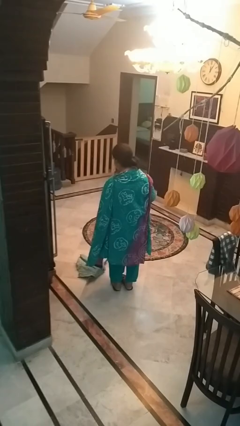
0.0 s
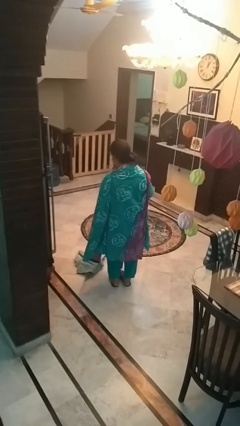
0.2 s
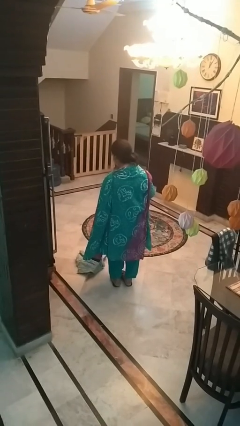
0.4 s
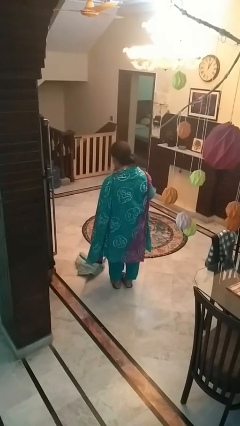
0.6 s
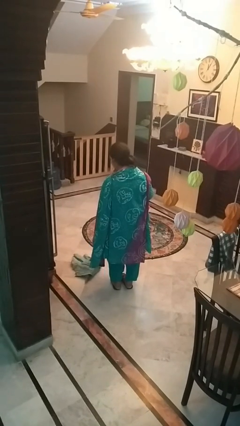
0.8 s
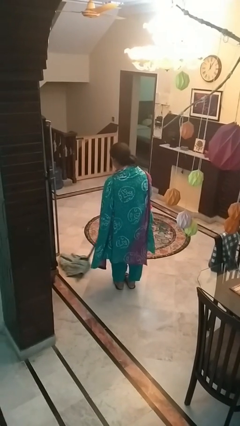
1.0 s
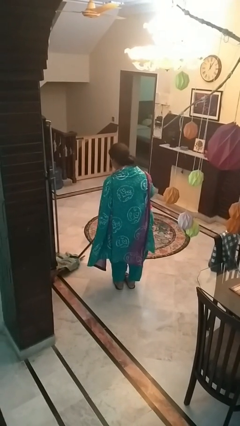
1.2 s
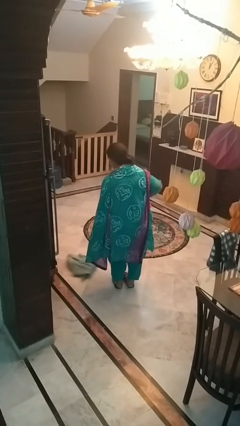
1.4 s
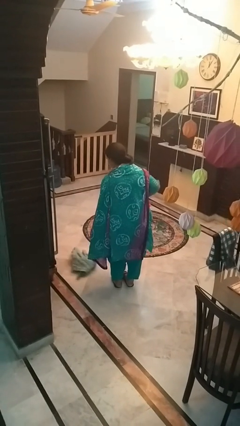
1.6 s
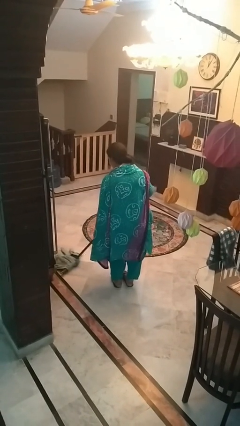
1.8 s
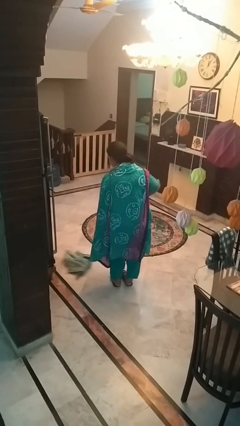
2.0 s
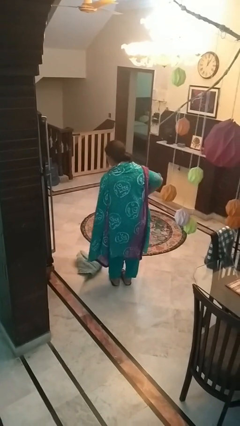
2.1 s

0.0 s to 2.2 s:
person mops

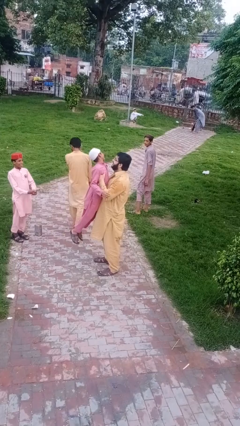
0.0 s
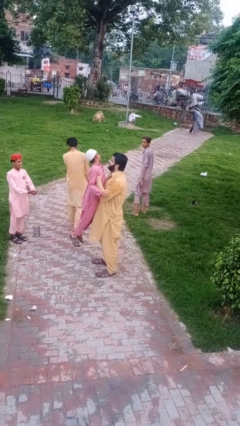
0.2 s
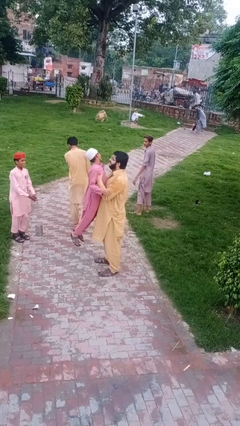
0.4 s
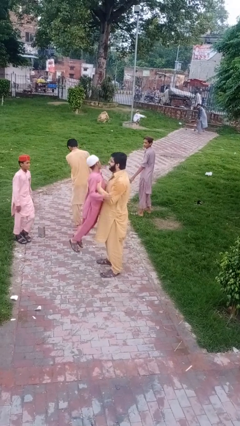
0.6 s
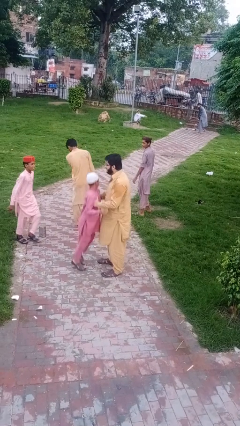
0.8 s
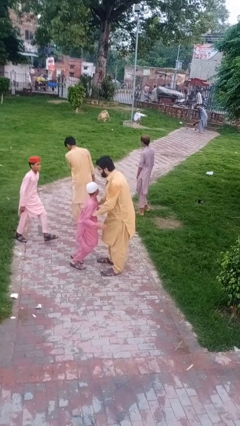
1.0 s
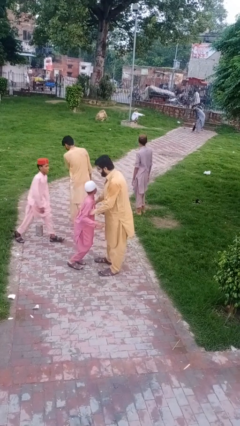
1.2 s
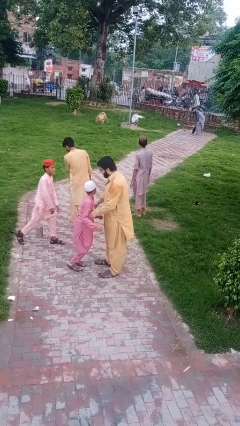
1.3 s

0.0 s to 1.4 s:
person puts down person

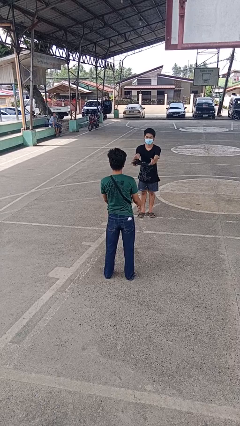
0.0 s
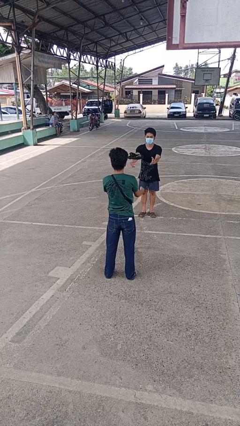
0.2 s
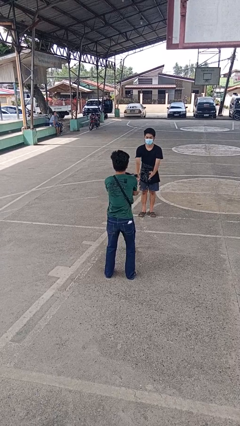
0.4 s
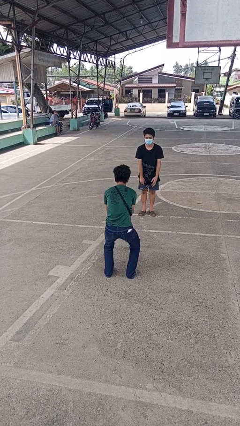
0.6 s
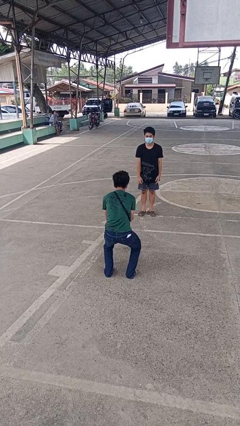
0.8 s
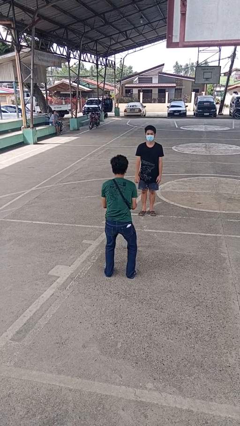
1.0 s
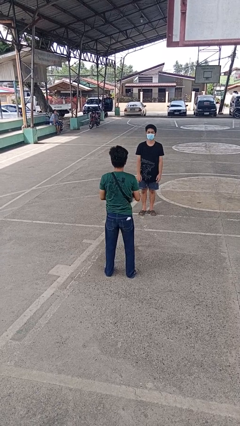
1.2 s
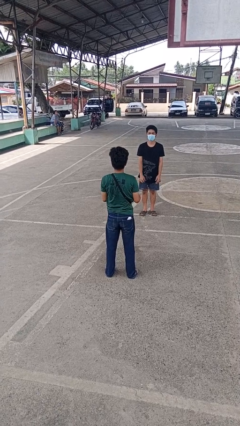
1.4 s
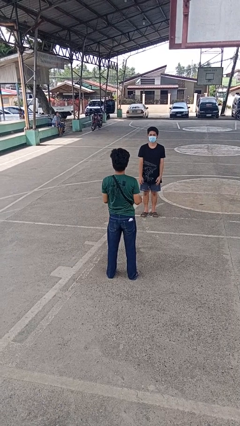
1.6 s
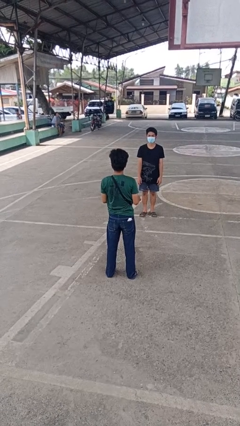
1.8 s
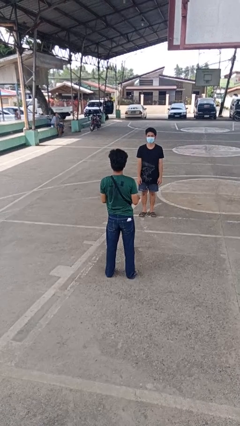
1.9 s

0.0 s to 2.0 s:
person catches object from person

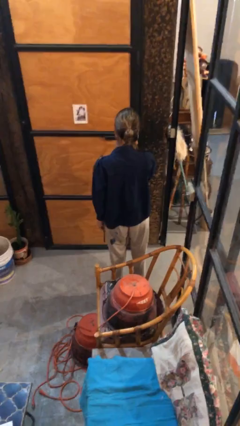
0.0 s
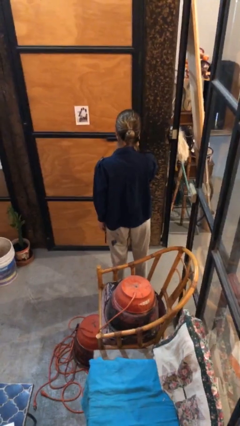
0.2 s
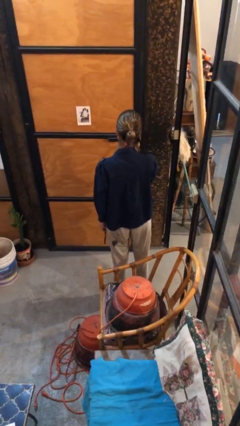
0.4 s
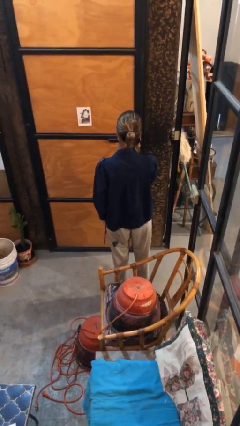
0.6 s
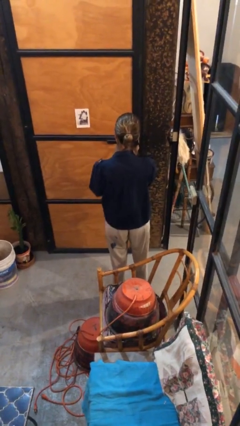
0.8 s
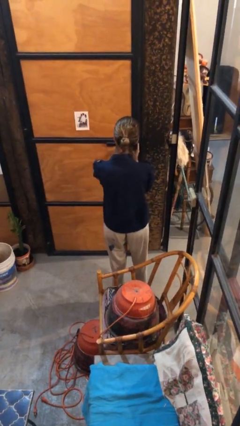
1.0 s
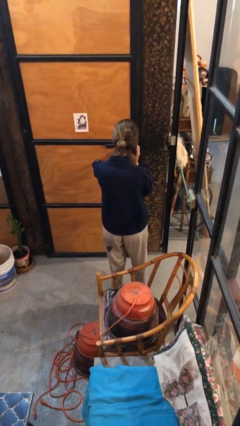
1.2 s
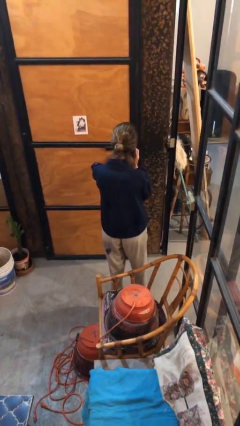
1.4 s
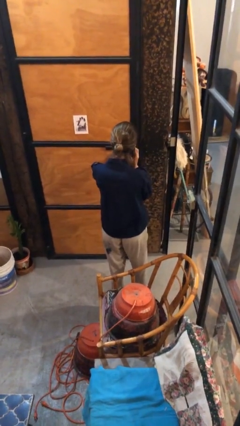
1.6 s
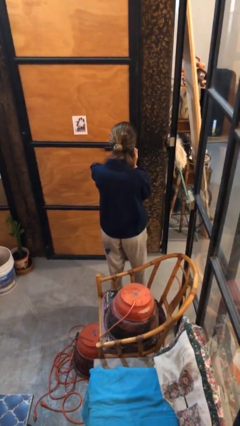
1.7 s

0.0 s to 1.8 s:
person opens facility door

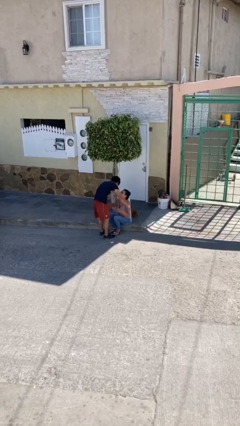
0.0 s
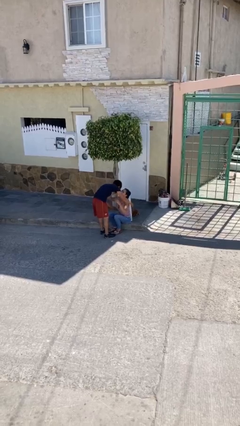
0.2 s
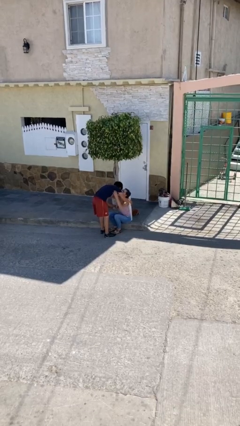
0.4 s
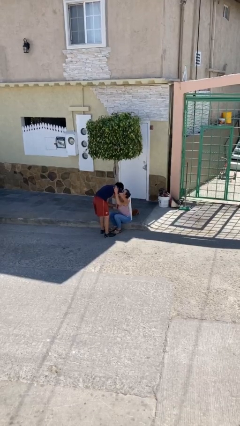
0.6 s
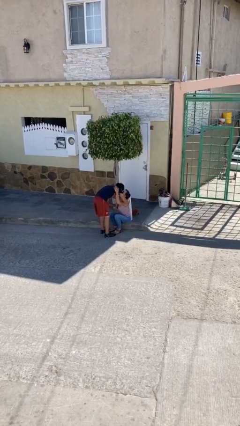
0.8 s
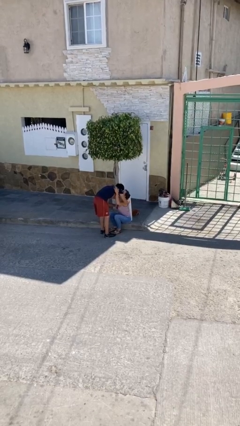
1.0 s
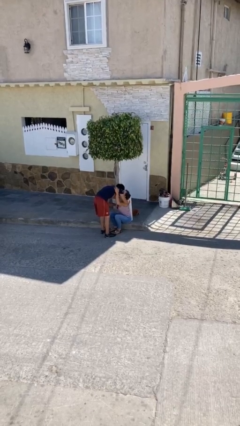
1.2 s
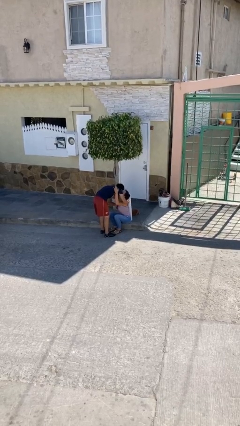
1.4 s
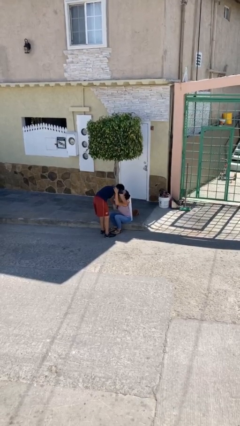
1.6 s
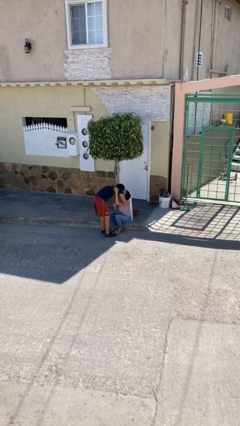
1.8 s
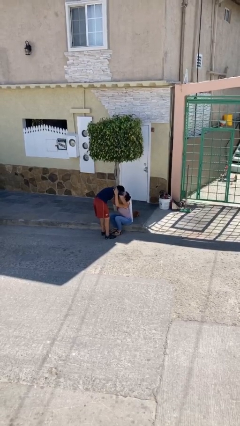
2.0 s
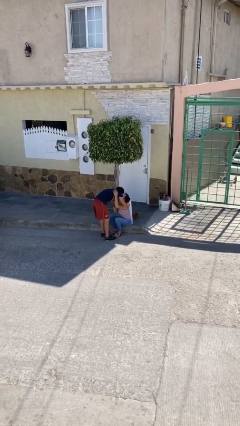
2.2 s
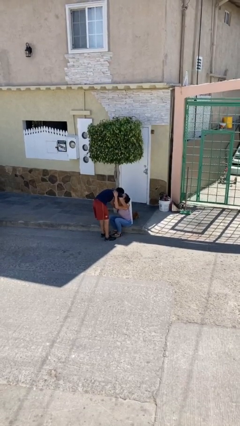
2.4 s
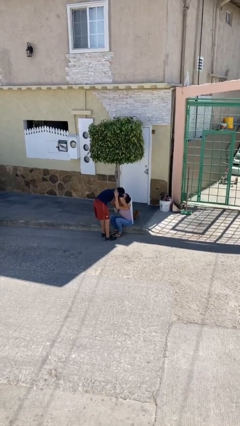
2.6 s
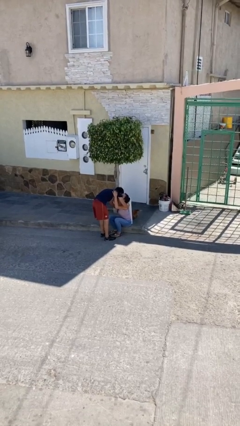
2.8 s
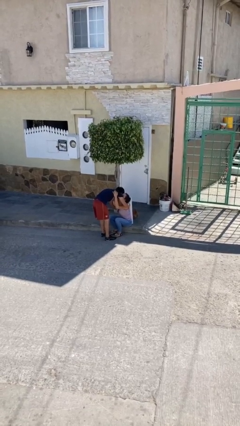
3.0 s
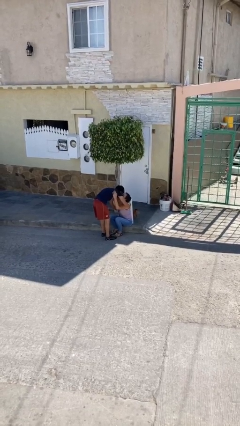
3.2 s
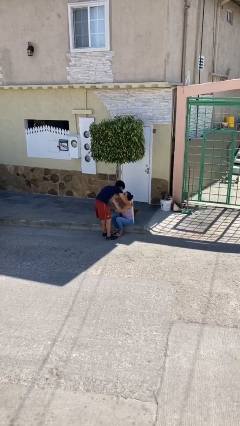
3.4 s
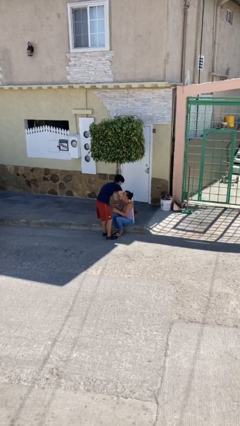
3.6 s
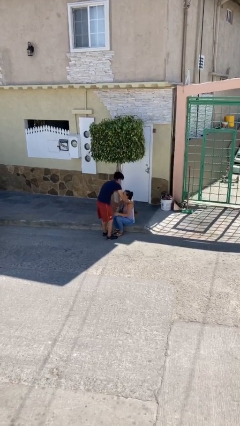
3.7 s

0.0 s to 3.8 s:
person embraces person

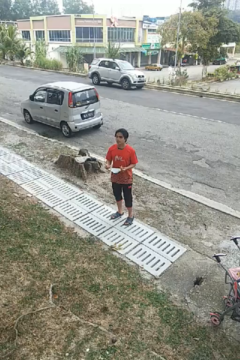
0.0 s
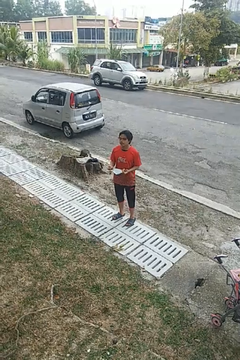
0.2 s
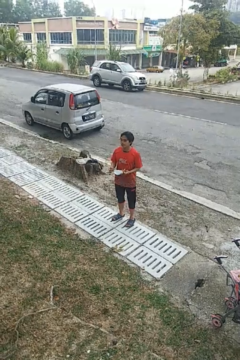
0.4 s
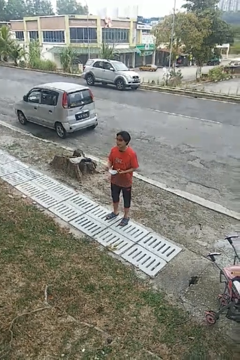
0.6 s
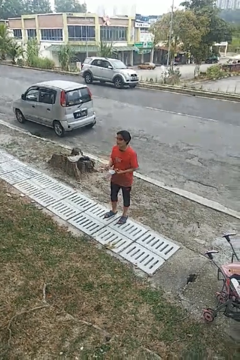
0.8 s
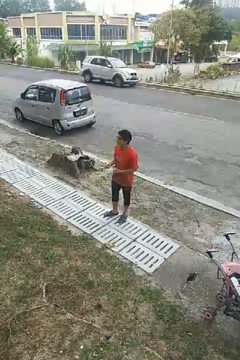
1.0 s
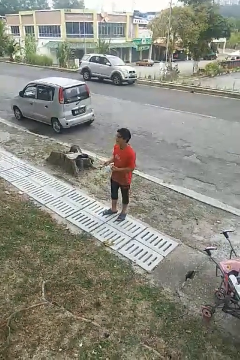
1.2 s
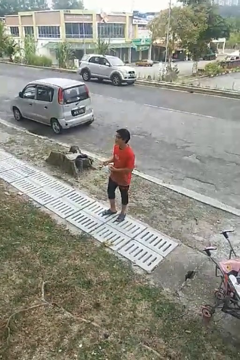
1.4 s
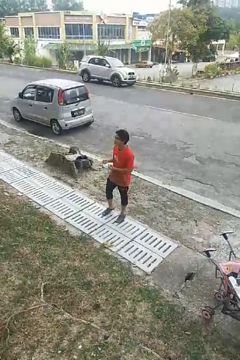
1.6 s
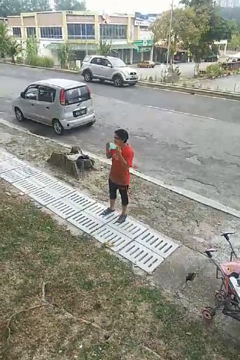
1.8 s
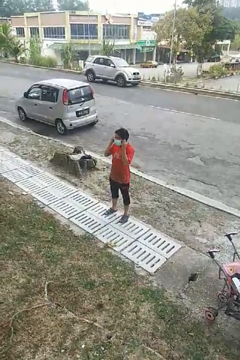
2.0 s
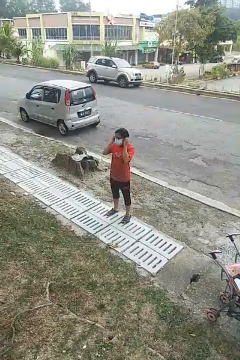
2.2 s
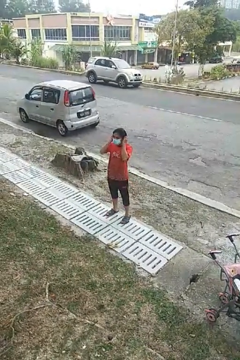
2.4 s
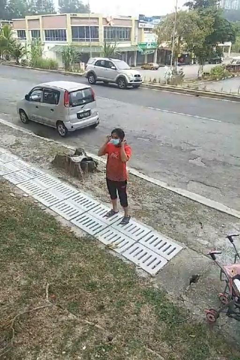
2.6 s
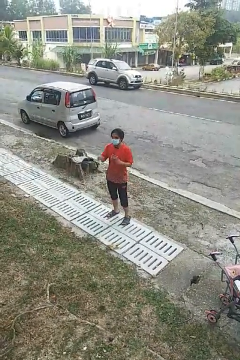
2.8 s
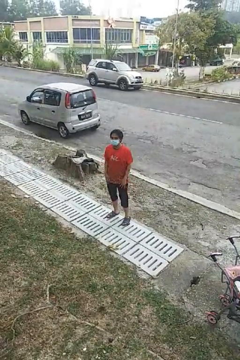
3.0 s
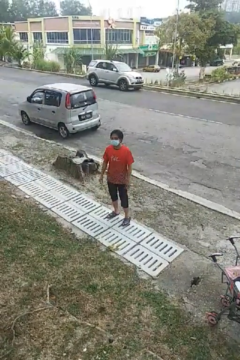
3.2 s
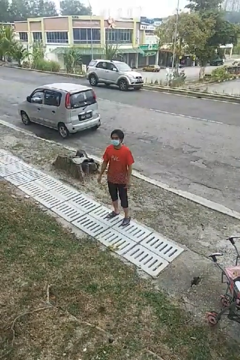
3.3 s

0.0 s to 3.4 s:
person puts on facemask

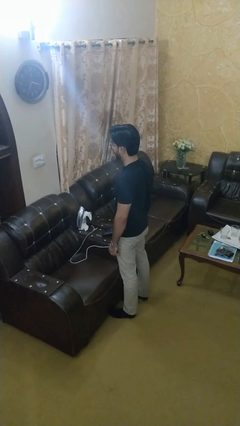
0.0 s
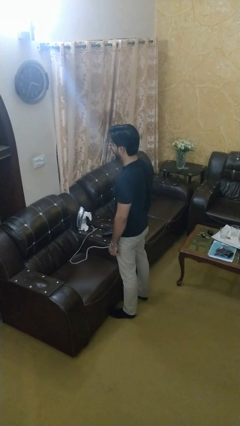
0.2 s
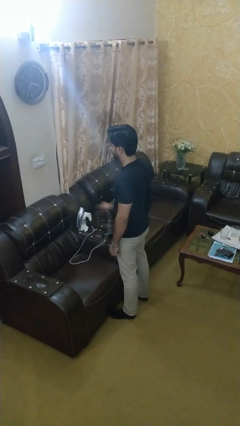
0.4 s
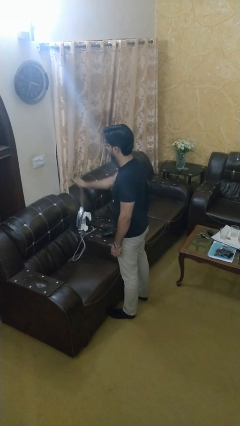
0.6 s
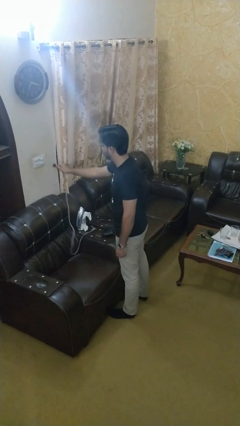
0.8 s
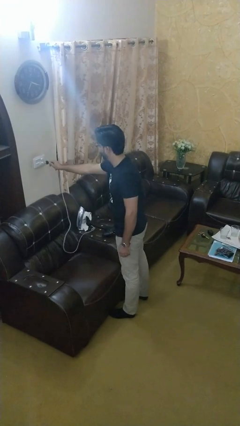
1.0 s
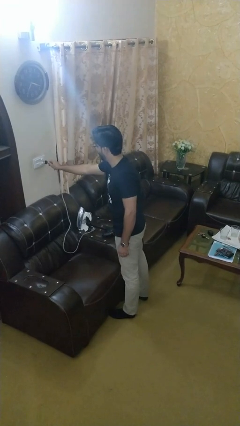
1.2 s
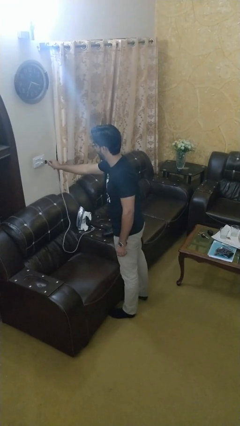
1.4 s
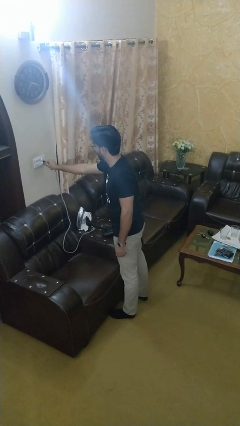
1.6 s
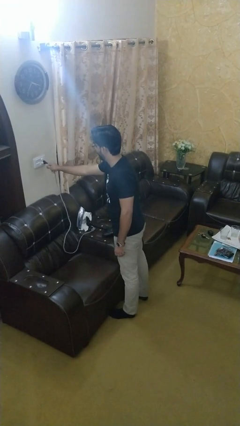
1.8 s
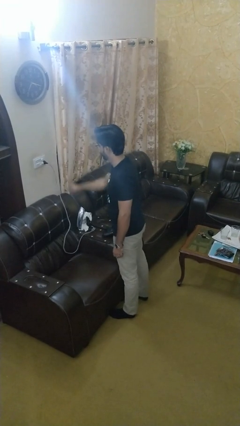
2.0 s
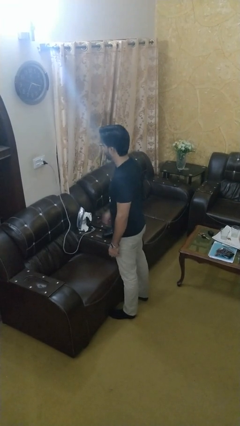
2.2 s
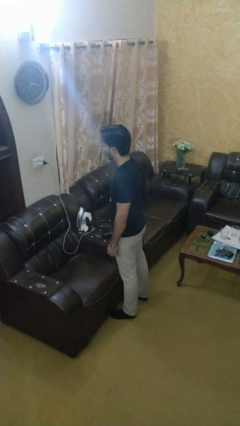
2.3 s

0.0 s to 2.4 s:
person plugs into electrical socket

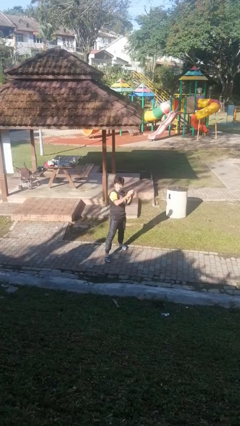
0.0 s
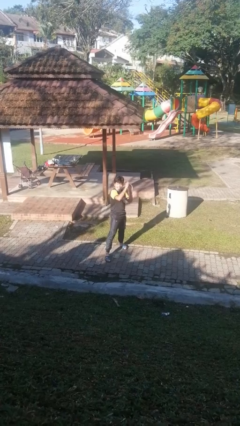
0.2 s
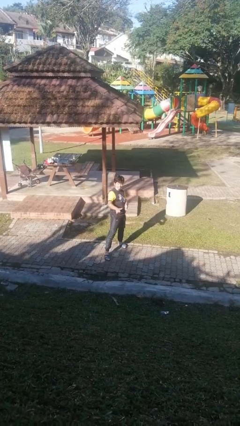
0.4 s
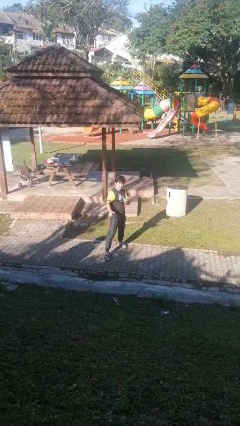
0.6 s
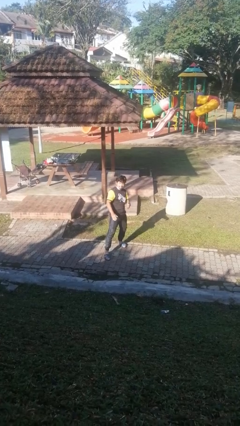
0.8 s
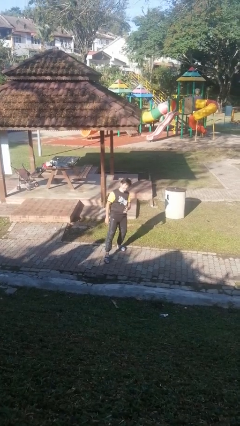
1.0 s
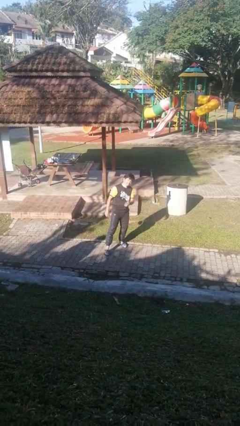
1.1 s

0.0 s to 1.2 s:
person karate chop
